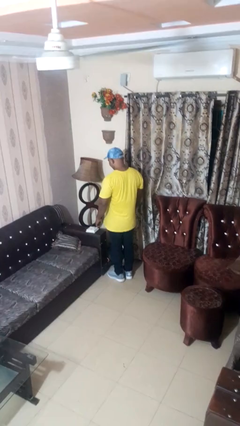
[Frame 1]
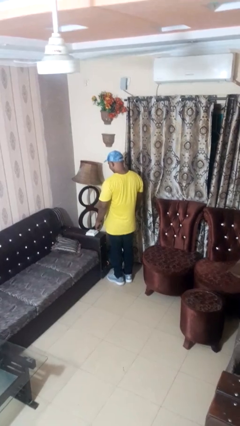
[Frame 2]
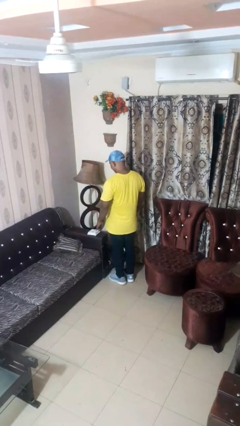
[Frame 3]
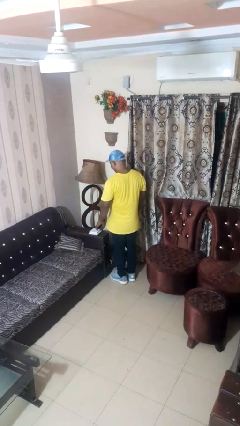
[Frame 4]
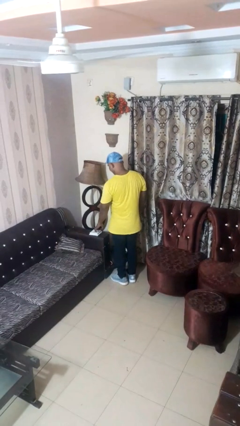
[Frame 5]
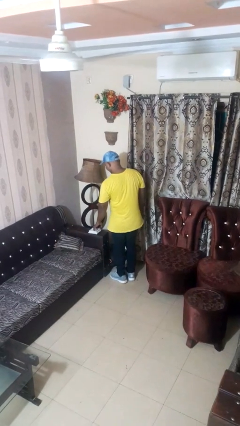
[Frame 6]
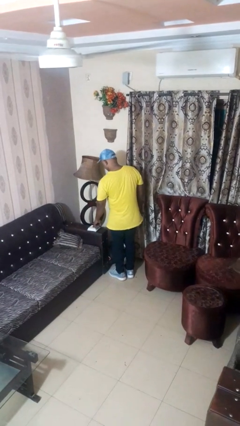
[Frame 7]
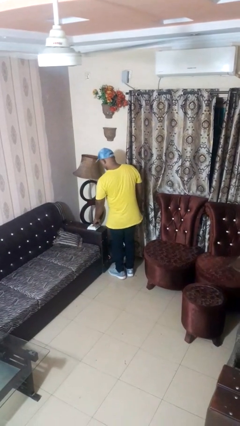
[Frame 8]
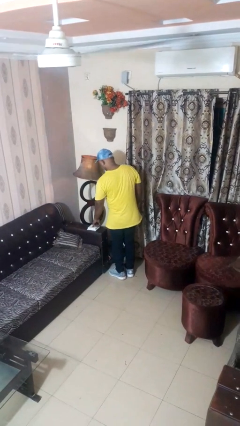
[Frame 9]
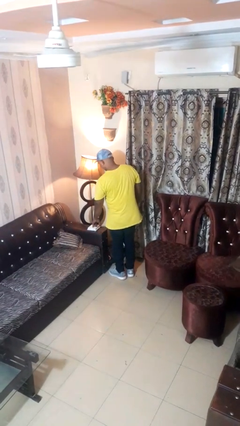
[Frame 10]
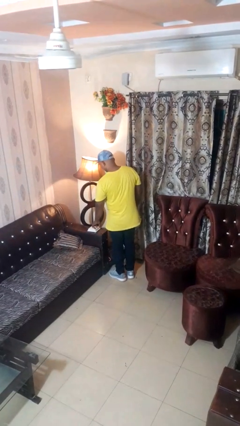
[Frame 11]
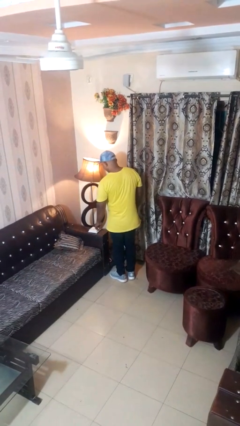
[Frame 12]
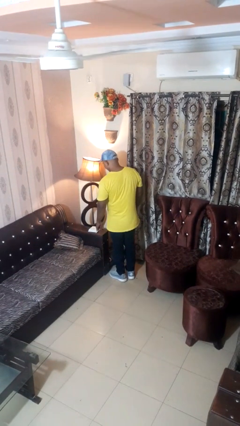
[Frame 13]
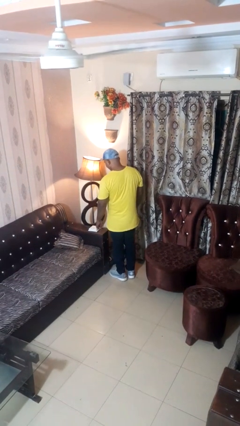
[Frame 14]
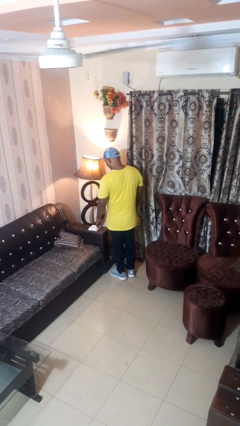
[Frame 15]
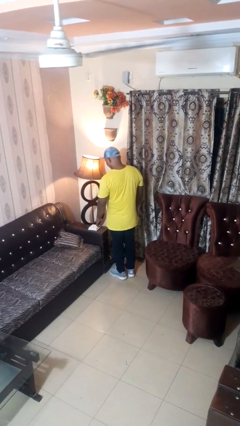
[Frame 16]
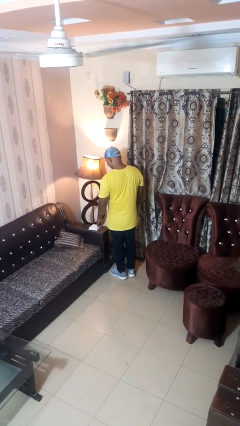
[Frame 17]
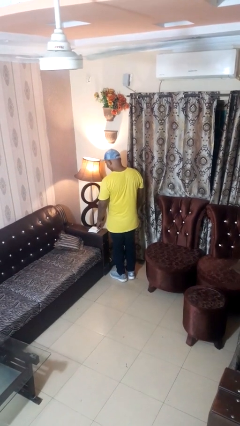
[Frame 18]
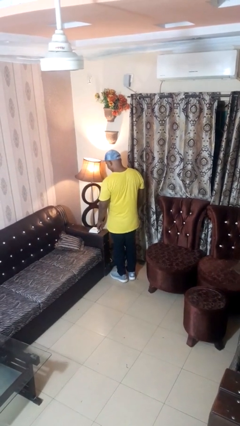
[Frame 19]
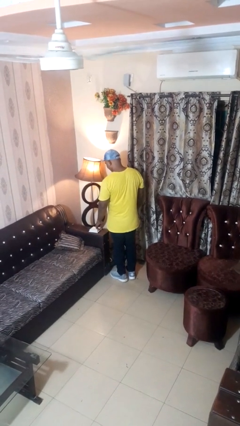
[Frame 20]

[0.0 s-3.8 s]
person turns on lamp

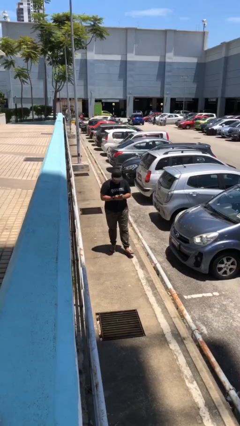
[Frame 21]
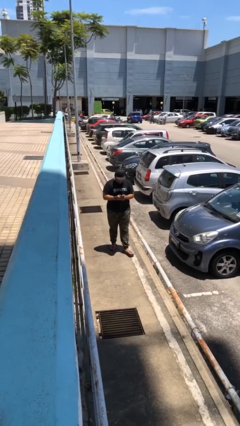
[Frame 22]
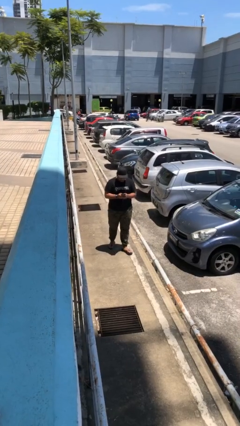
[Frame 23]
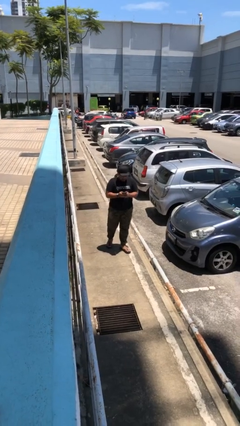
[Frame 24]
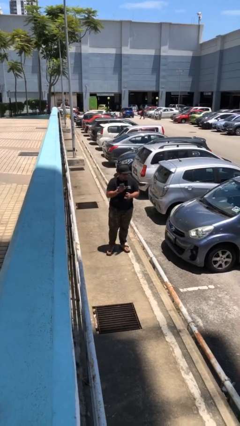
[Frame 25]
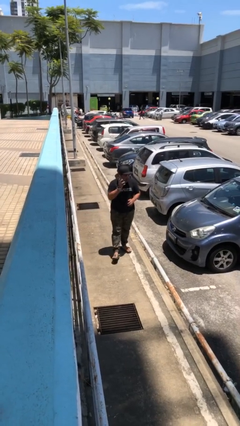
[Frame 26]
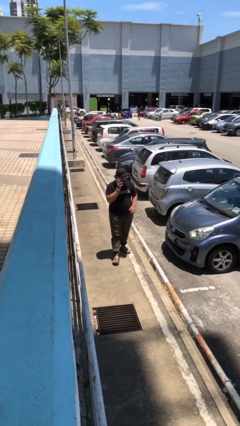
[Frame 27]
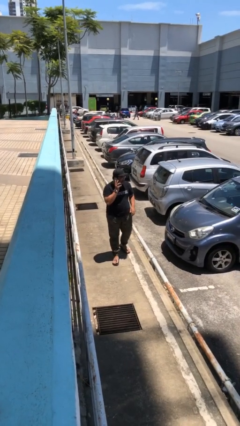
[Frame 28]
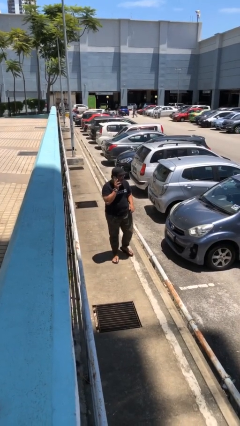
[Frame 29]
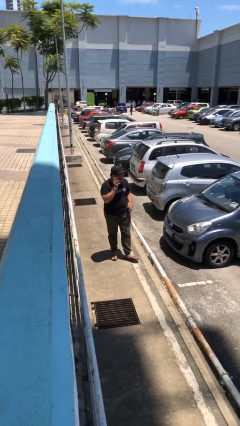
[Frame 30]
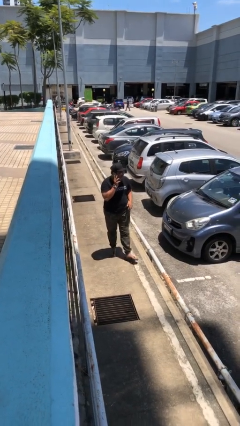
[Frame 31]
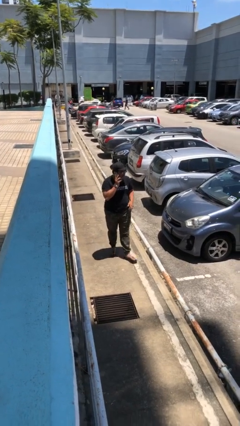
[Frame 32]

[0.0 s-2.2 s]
person talks on phone

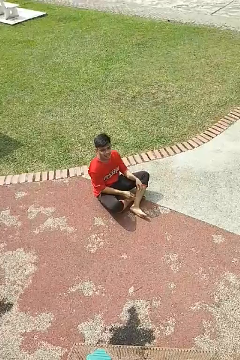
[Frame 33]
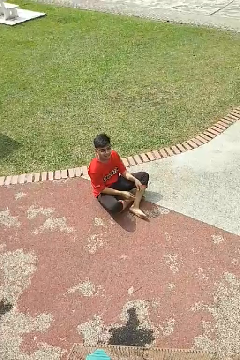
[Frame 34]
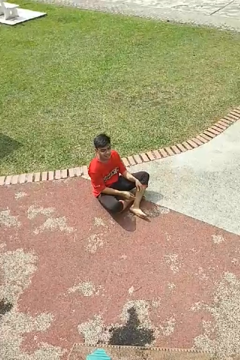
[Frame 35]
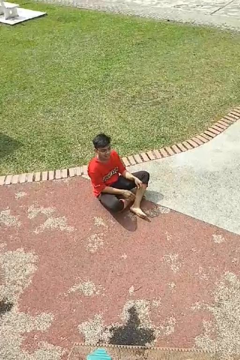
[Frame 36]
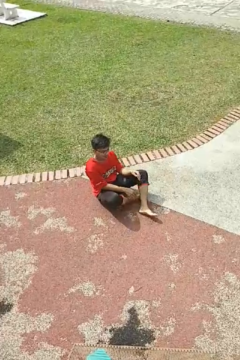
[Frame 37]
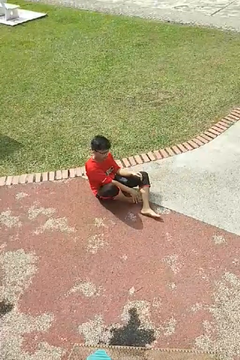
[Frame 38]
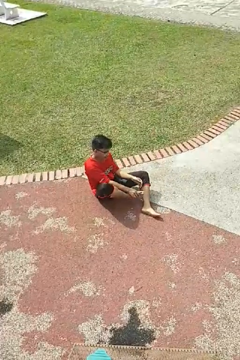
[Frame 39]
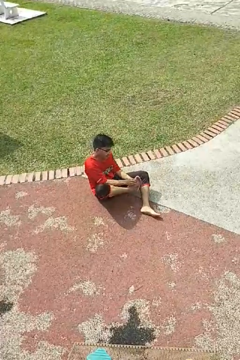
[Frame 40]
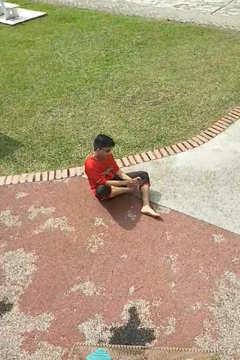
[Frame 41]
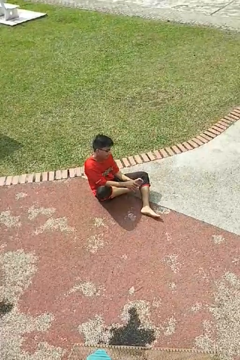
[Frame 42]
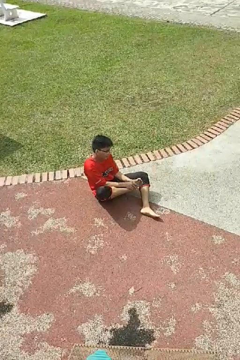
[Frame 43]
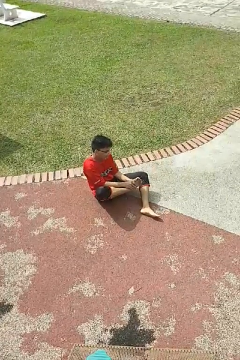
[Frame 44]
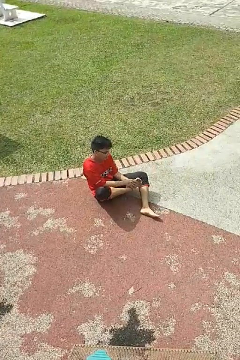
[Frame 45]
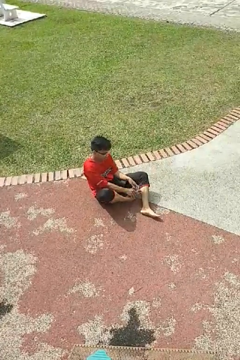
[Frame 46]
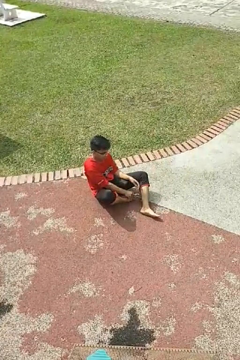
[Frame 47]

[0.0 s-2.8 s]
person rubs foot

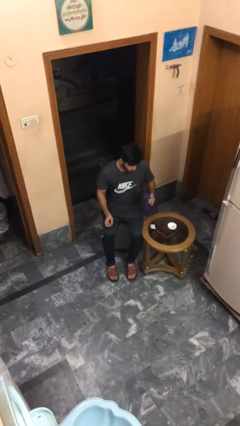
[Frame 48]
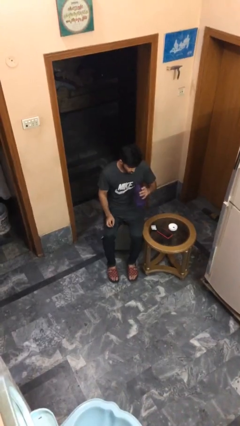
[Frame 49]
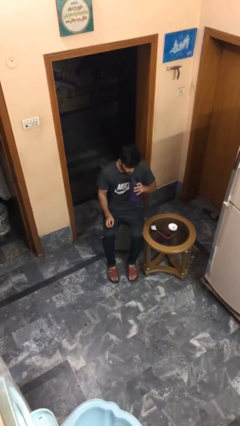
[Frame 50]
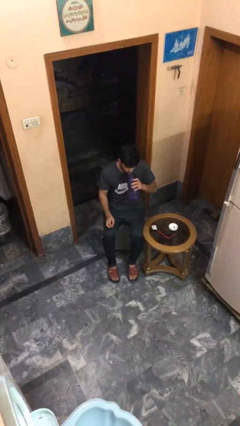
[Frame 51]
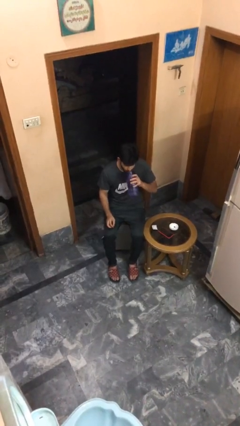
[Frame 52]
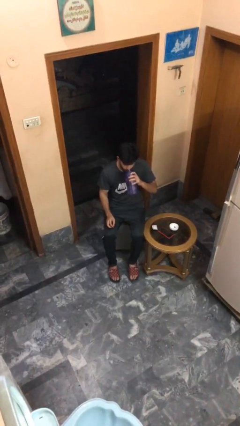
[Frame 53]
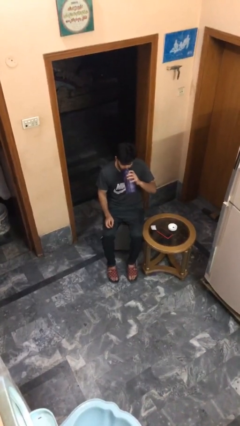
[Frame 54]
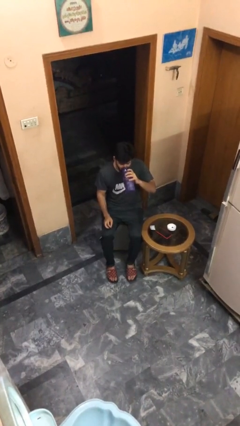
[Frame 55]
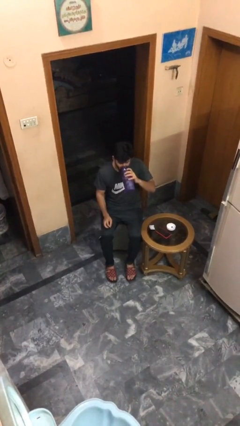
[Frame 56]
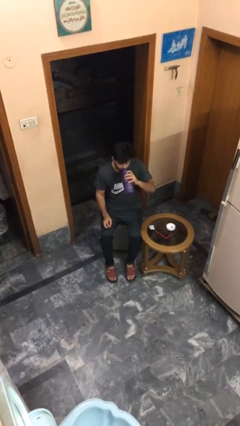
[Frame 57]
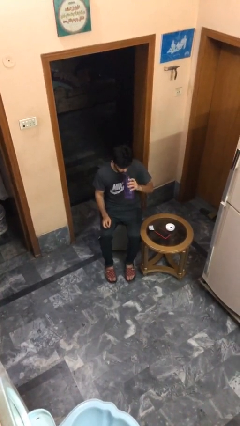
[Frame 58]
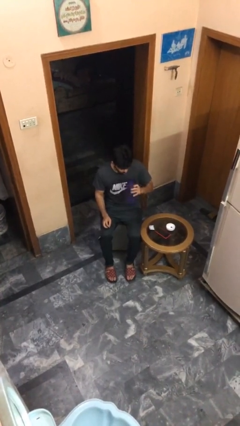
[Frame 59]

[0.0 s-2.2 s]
person drinks from cup

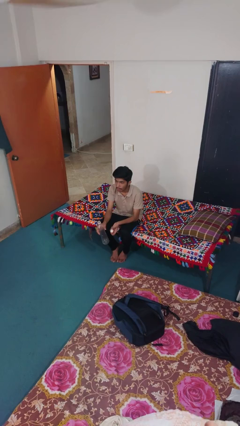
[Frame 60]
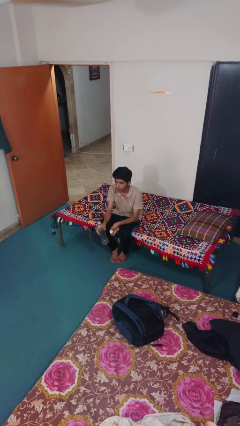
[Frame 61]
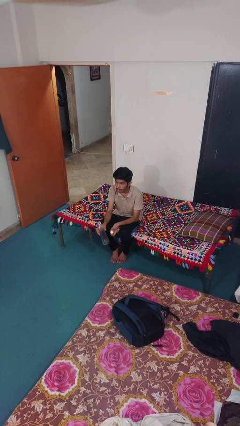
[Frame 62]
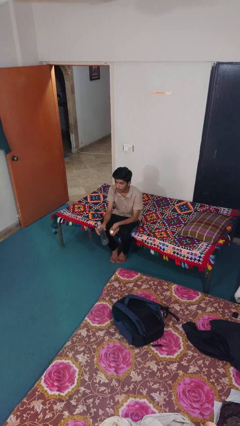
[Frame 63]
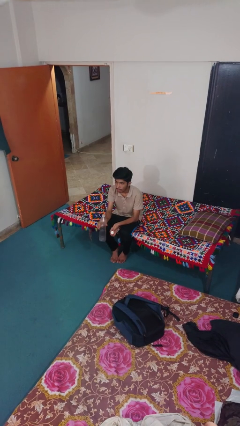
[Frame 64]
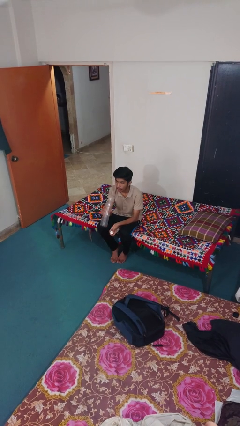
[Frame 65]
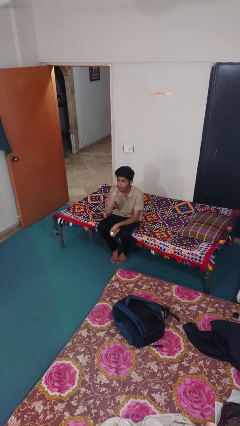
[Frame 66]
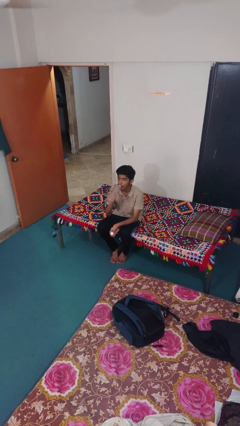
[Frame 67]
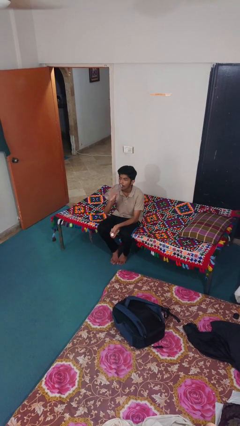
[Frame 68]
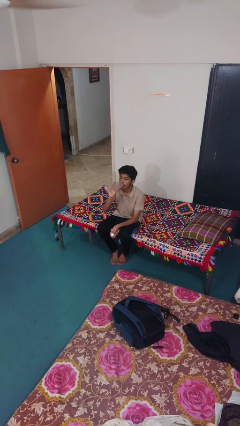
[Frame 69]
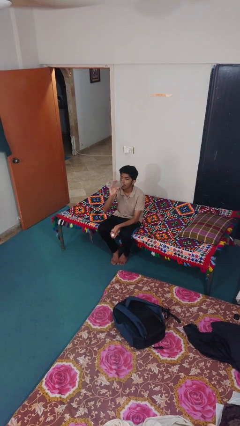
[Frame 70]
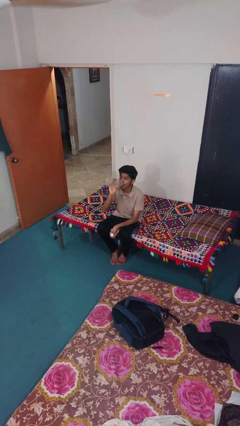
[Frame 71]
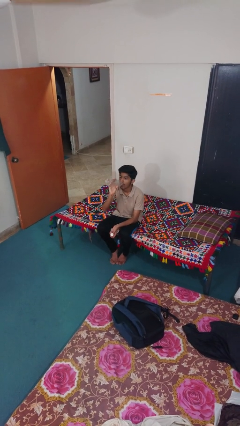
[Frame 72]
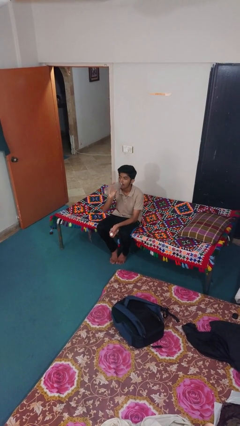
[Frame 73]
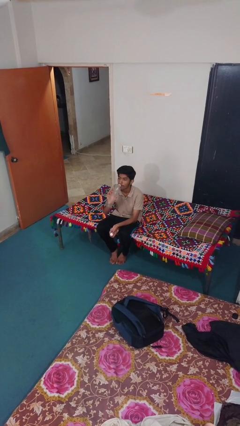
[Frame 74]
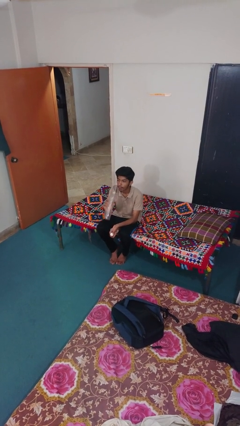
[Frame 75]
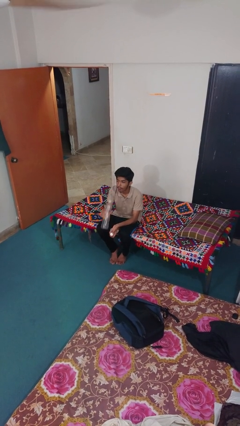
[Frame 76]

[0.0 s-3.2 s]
person drinks from bottle

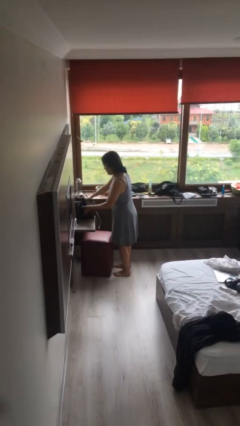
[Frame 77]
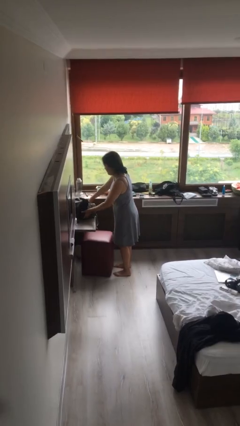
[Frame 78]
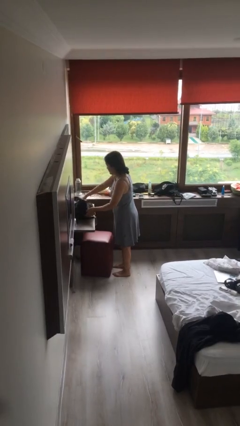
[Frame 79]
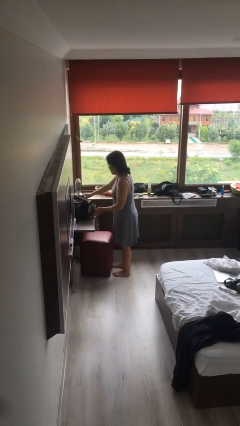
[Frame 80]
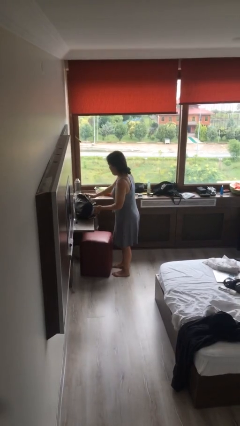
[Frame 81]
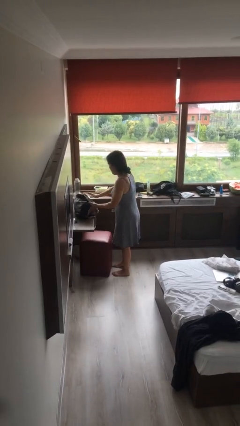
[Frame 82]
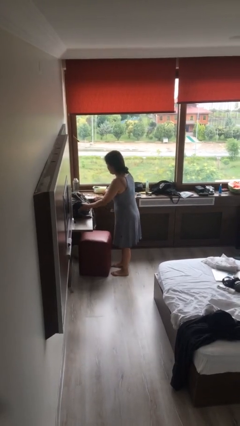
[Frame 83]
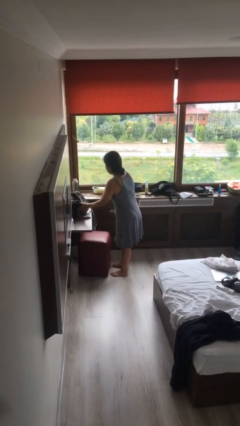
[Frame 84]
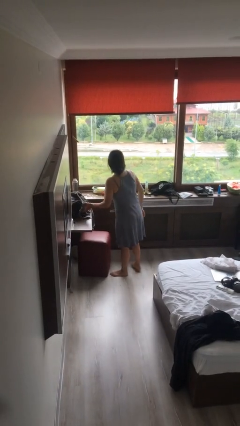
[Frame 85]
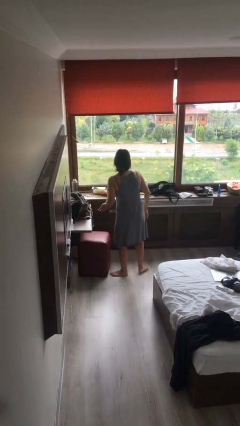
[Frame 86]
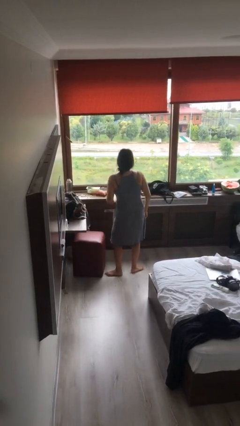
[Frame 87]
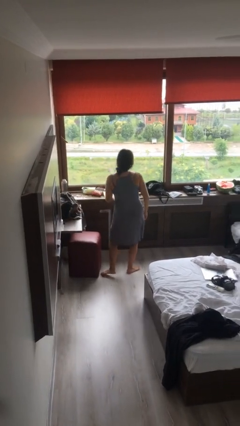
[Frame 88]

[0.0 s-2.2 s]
person puts down object on table

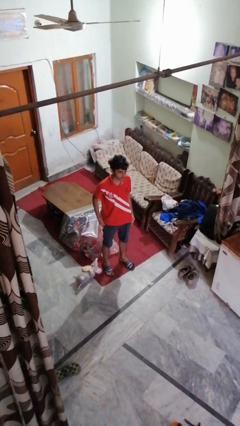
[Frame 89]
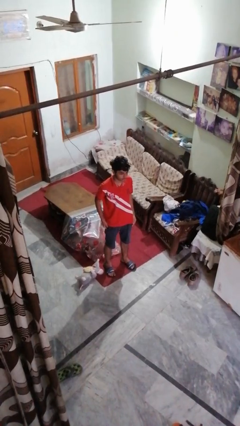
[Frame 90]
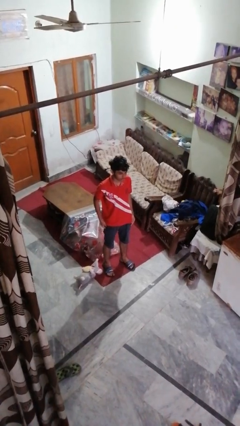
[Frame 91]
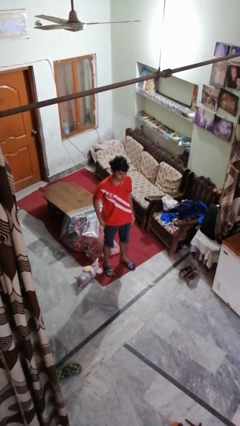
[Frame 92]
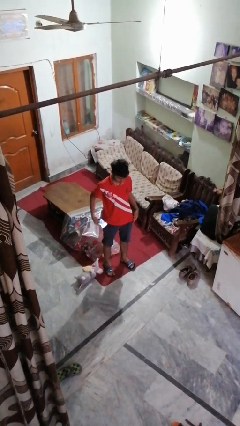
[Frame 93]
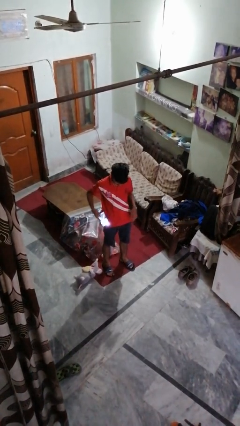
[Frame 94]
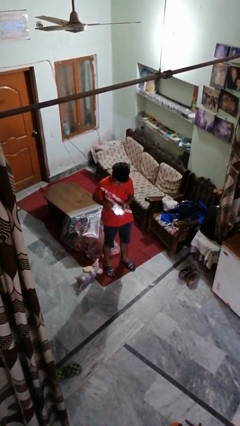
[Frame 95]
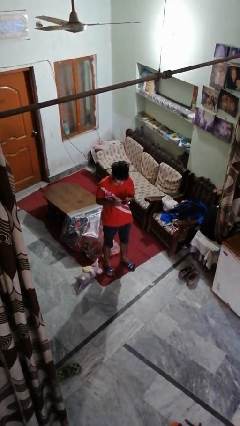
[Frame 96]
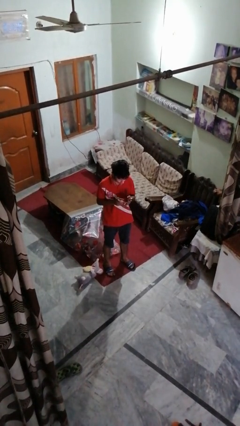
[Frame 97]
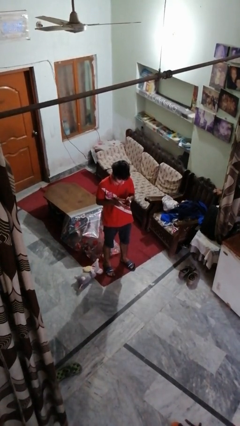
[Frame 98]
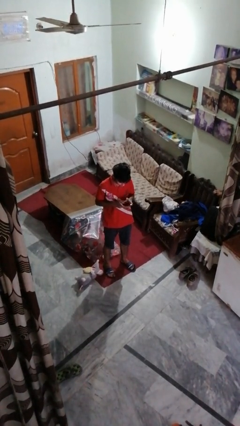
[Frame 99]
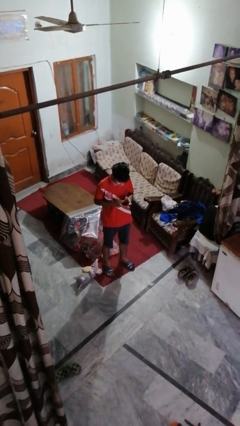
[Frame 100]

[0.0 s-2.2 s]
person takes phone from pocket
